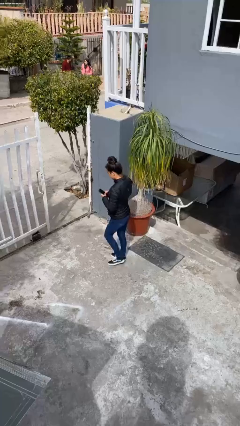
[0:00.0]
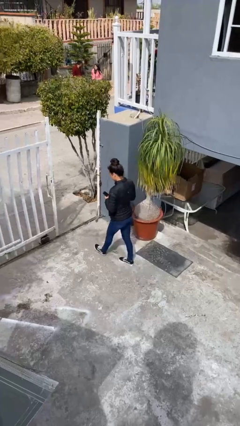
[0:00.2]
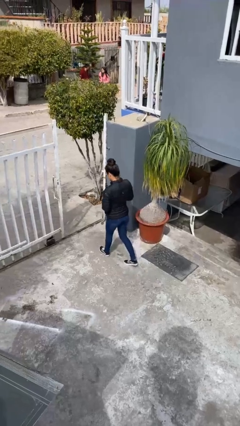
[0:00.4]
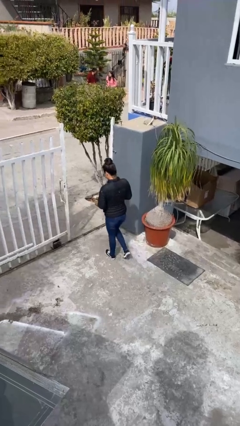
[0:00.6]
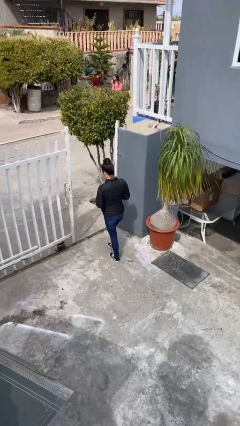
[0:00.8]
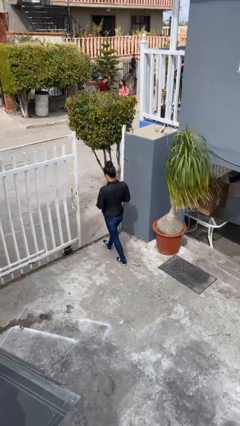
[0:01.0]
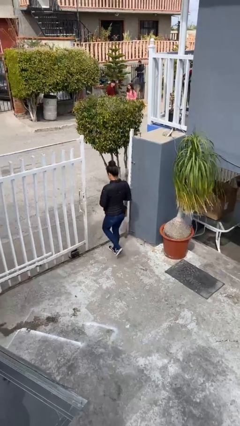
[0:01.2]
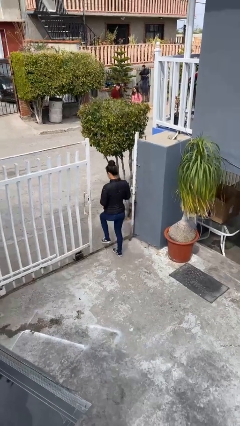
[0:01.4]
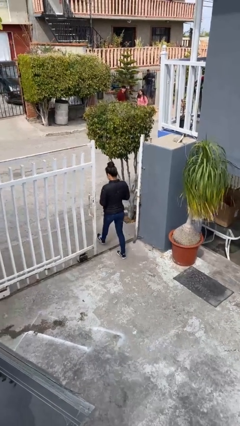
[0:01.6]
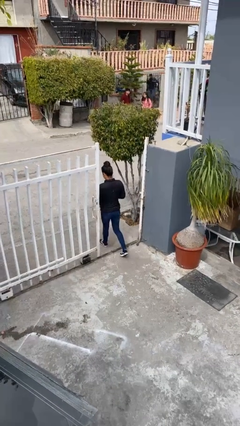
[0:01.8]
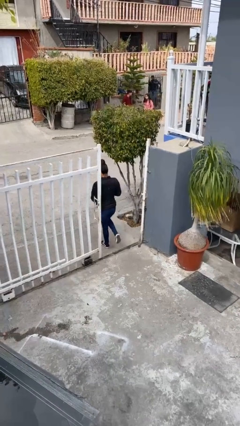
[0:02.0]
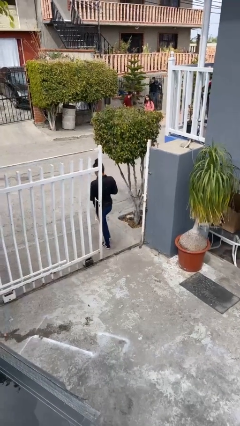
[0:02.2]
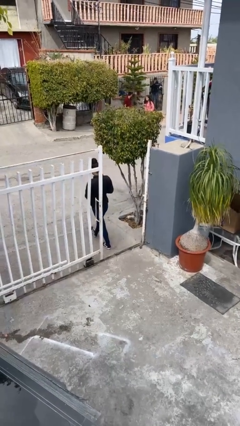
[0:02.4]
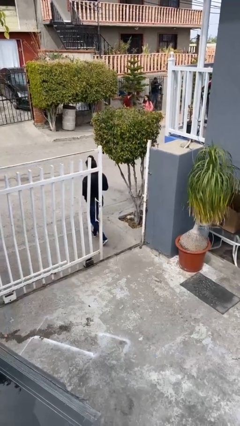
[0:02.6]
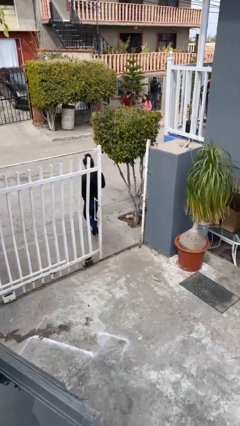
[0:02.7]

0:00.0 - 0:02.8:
person exits scene through structure

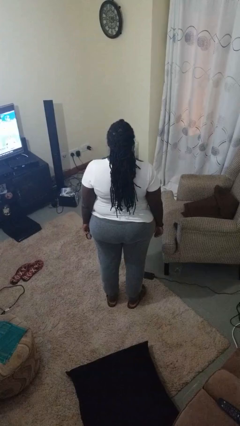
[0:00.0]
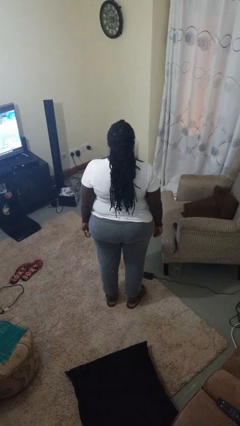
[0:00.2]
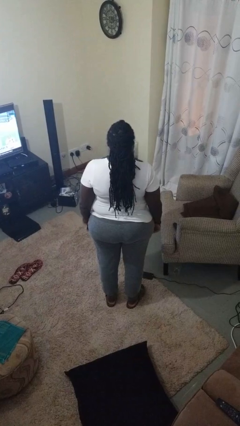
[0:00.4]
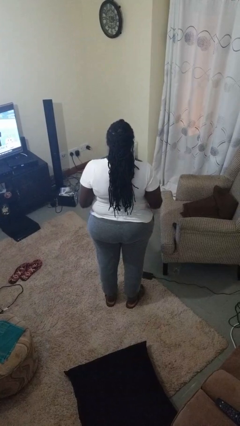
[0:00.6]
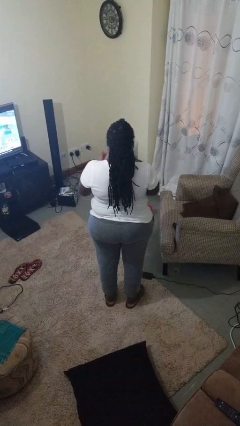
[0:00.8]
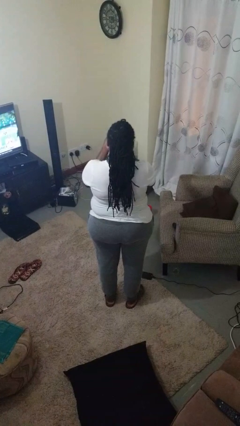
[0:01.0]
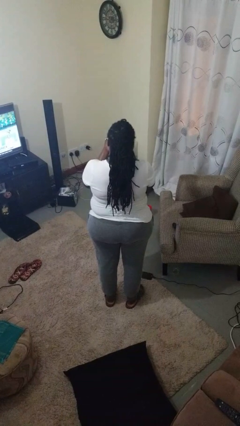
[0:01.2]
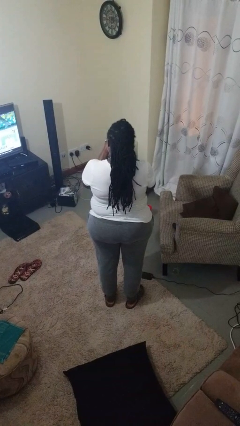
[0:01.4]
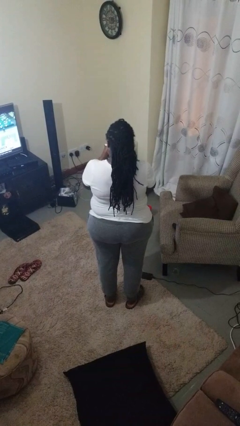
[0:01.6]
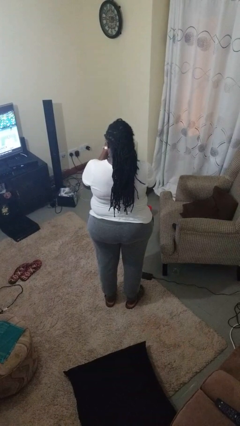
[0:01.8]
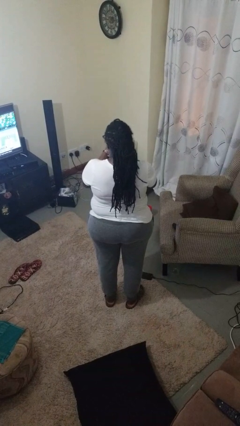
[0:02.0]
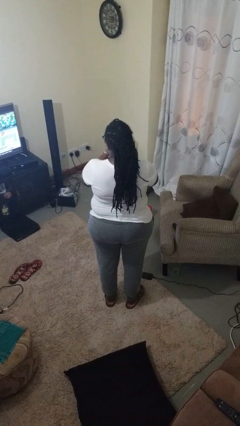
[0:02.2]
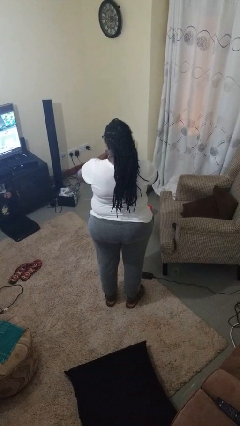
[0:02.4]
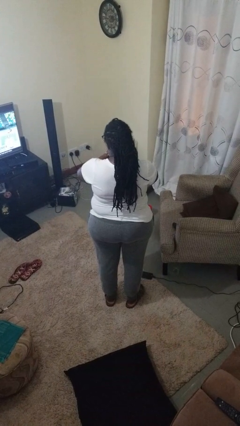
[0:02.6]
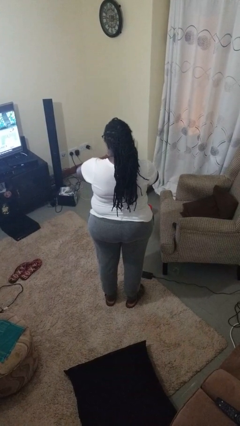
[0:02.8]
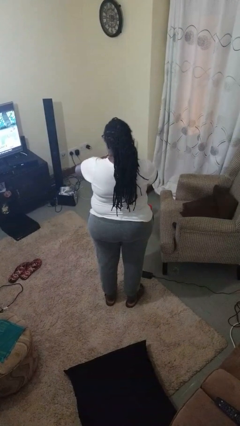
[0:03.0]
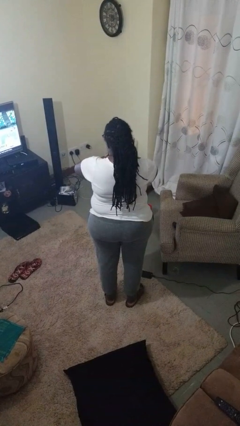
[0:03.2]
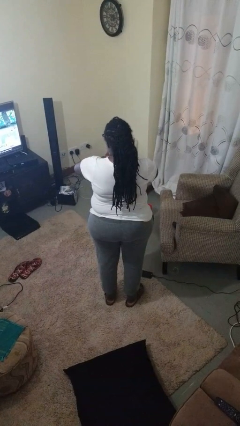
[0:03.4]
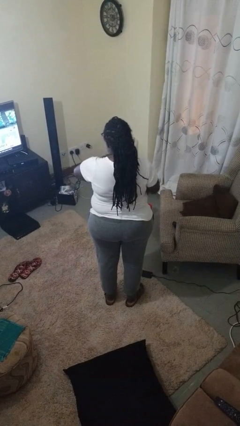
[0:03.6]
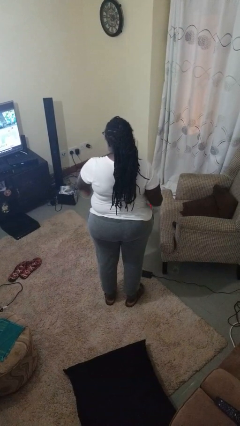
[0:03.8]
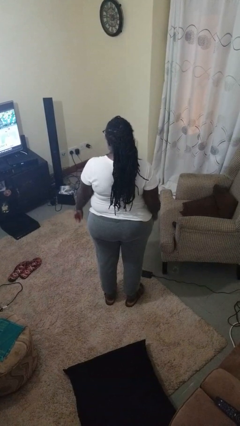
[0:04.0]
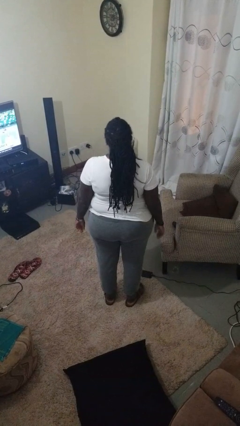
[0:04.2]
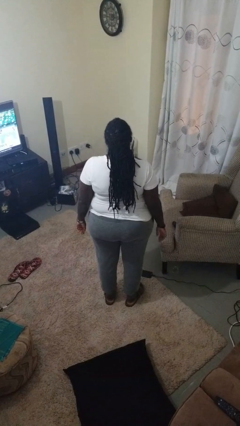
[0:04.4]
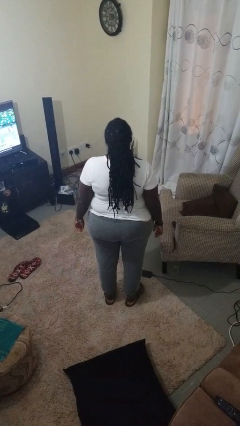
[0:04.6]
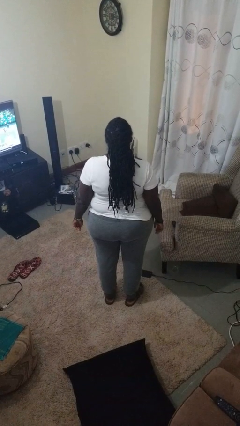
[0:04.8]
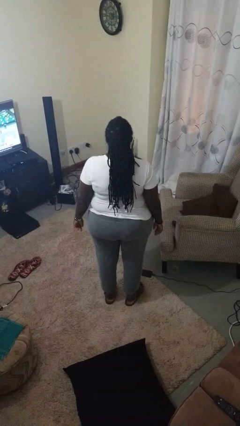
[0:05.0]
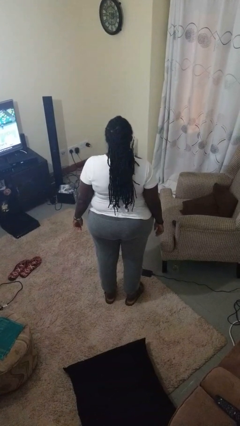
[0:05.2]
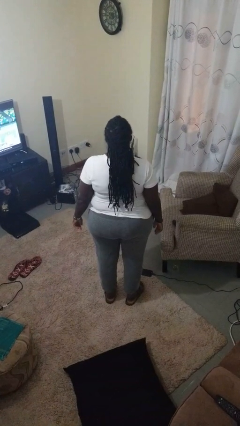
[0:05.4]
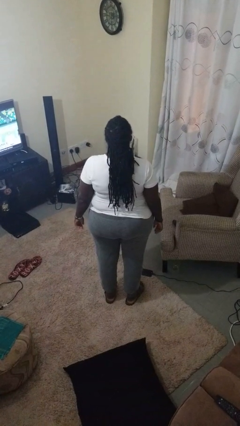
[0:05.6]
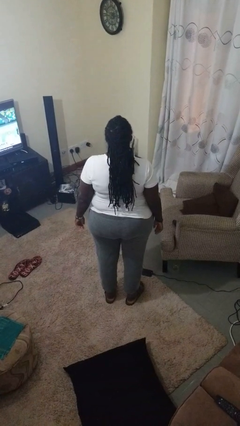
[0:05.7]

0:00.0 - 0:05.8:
person puts on wristwatch

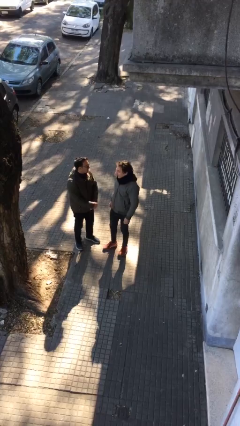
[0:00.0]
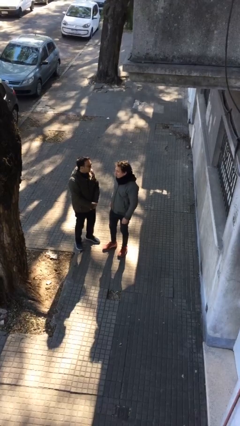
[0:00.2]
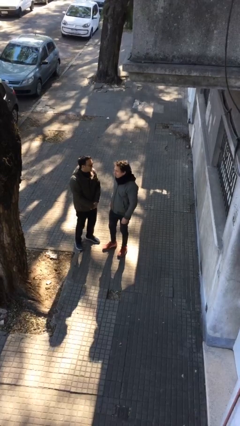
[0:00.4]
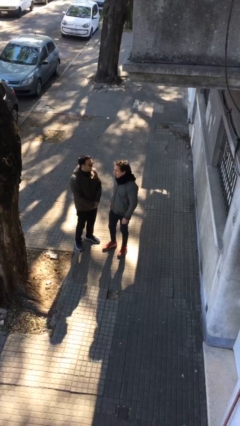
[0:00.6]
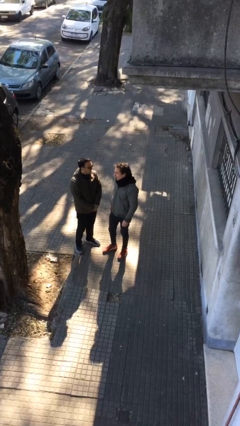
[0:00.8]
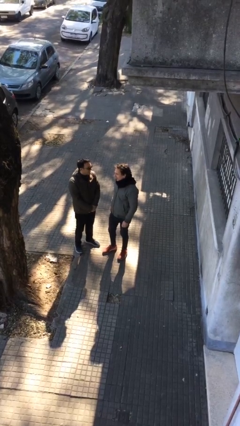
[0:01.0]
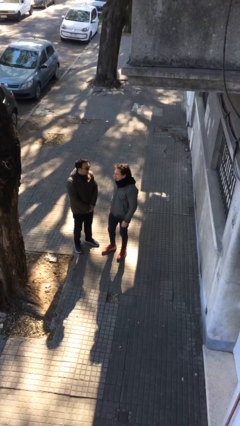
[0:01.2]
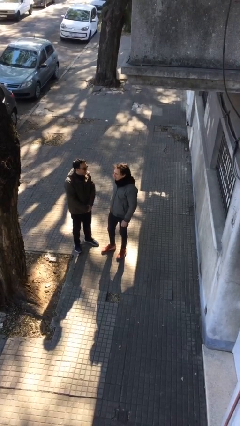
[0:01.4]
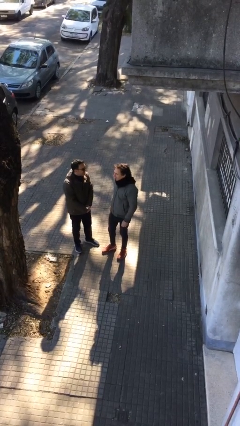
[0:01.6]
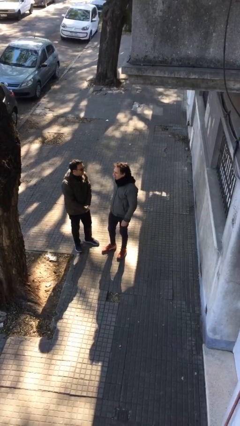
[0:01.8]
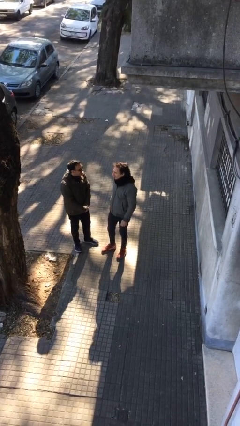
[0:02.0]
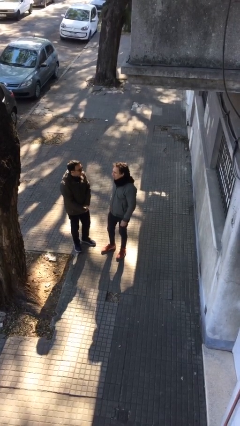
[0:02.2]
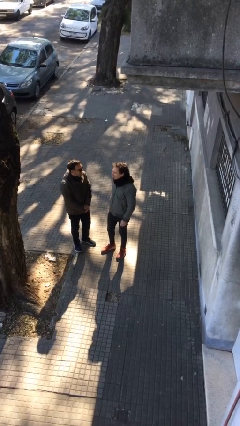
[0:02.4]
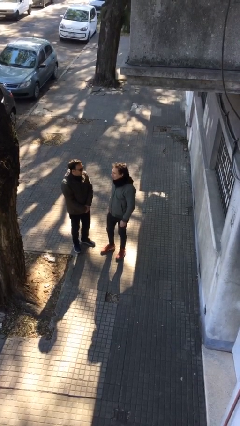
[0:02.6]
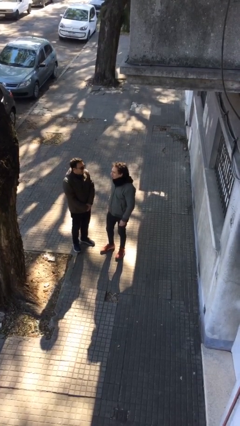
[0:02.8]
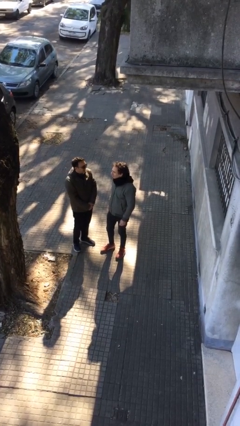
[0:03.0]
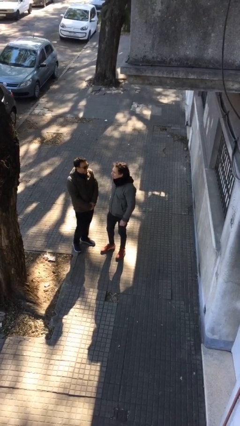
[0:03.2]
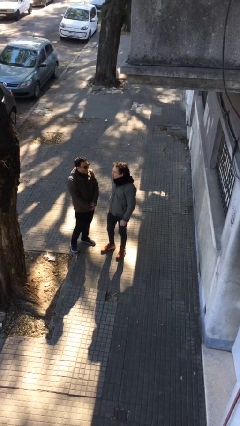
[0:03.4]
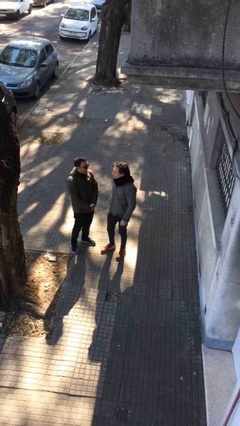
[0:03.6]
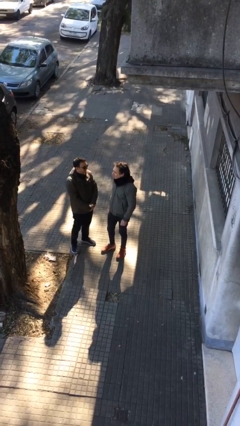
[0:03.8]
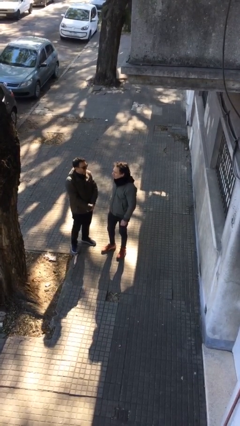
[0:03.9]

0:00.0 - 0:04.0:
person talks to person

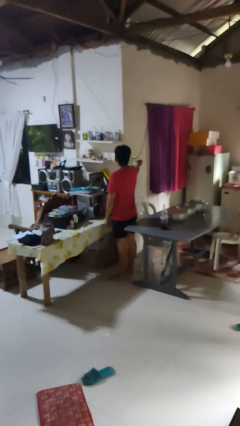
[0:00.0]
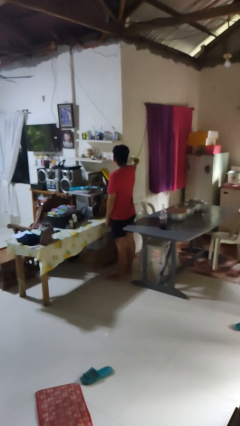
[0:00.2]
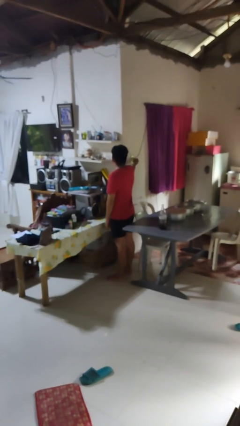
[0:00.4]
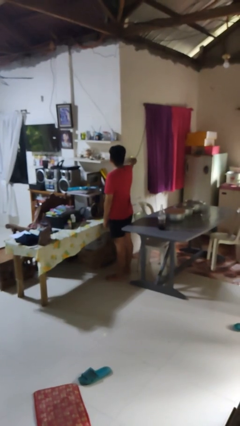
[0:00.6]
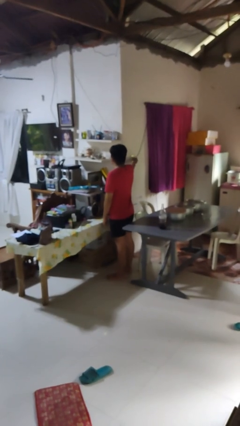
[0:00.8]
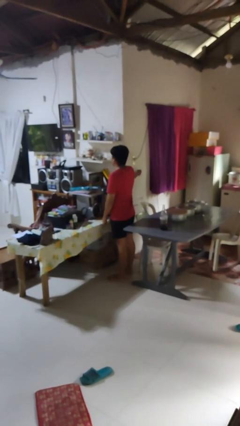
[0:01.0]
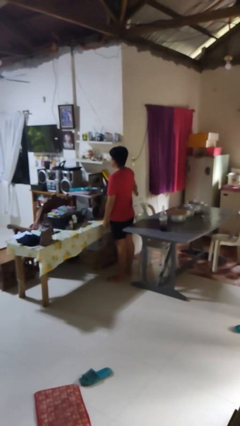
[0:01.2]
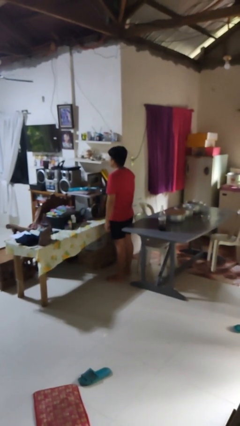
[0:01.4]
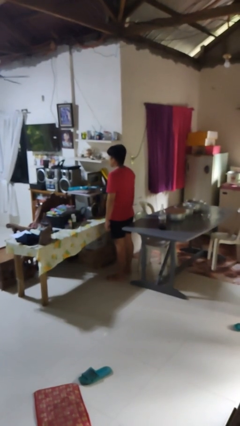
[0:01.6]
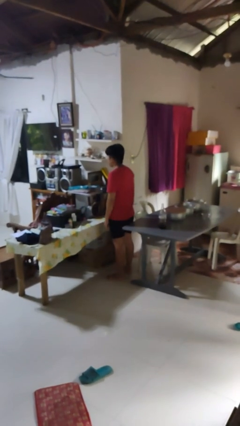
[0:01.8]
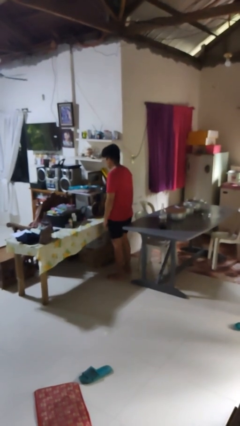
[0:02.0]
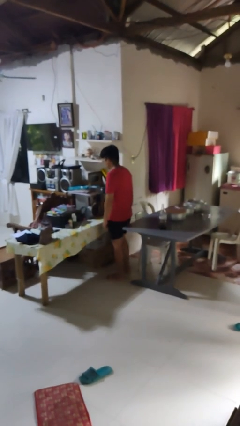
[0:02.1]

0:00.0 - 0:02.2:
person turns on fan

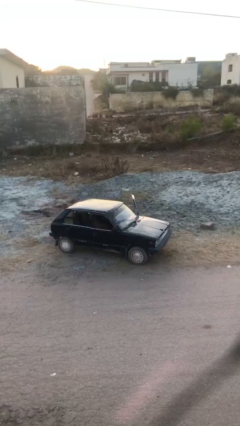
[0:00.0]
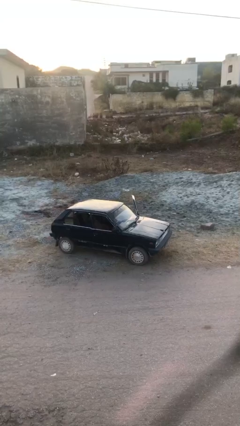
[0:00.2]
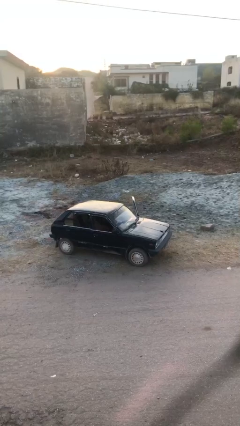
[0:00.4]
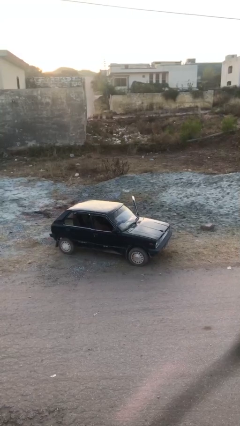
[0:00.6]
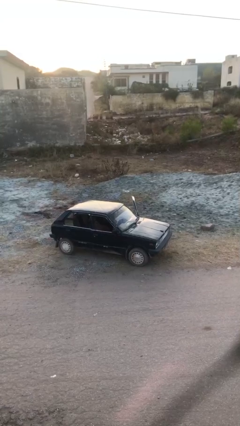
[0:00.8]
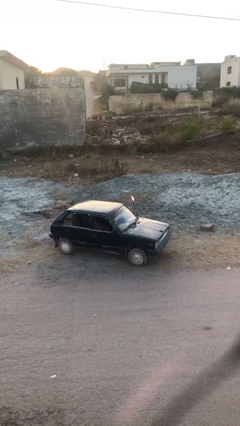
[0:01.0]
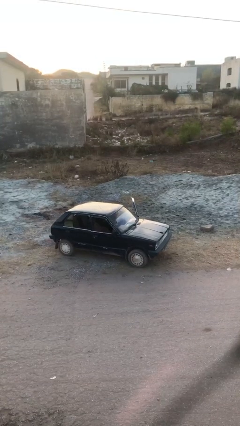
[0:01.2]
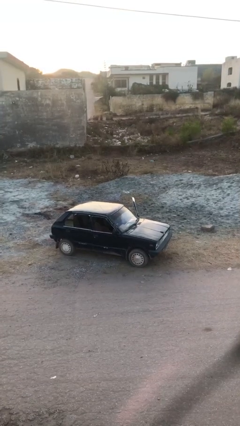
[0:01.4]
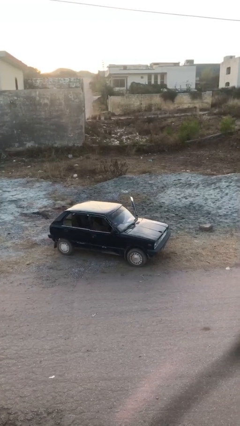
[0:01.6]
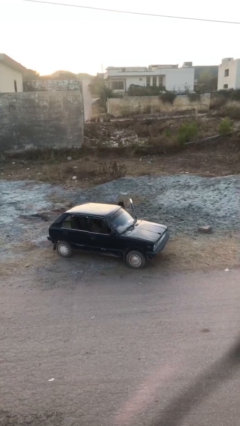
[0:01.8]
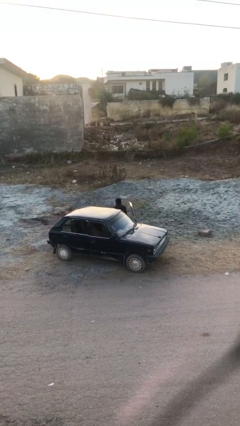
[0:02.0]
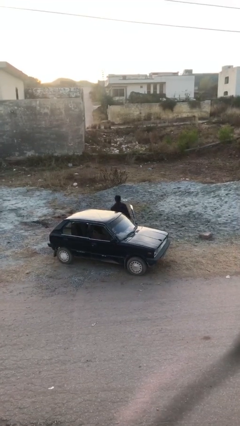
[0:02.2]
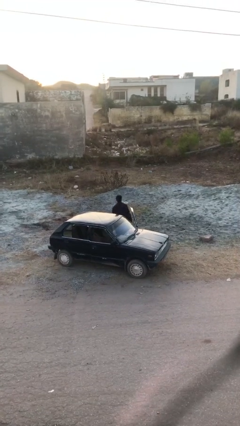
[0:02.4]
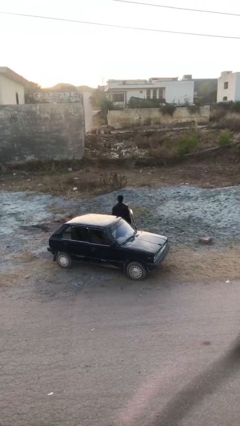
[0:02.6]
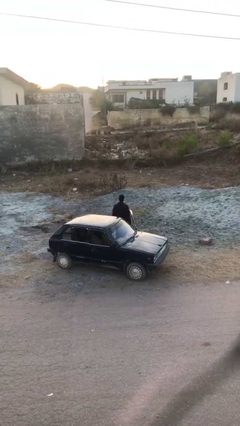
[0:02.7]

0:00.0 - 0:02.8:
person exits car

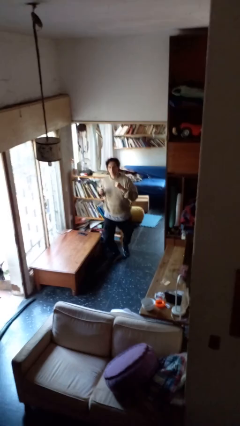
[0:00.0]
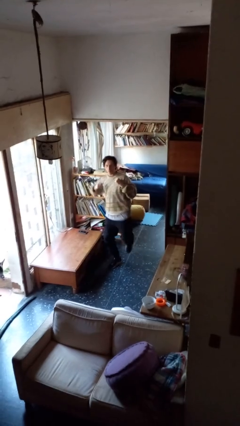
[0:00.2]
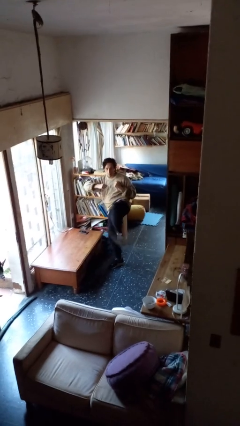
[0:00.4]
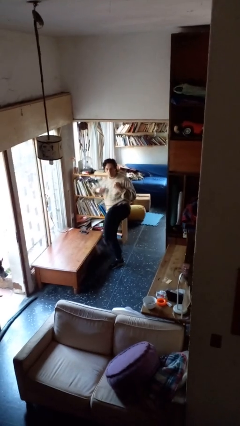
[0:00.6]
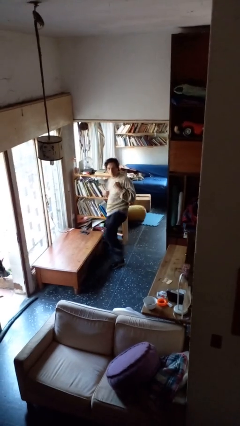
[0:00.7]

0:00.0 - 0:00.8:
person karate kicks
